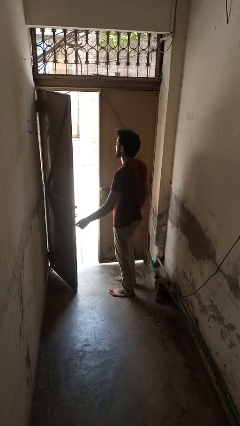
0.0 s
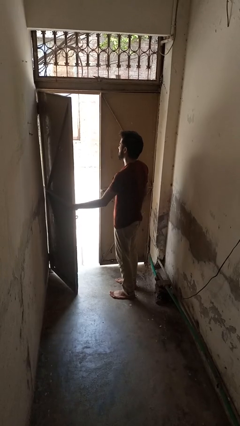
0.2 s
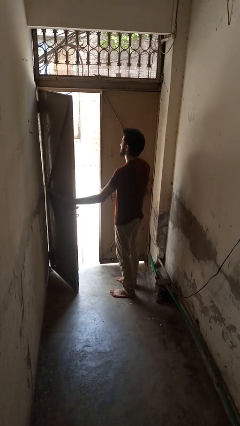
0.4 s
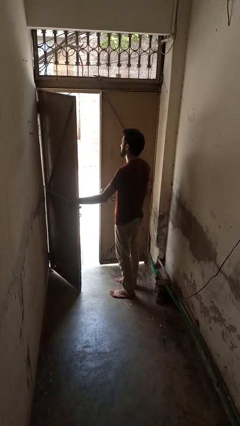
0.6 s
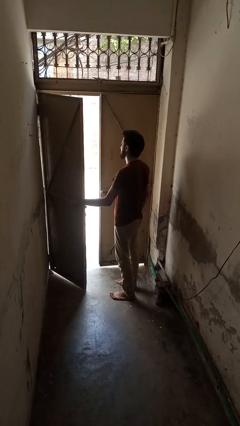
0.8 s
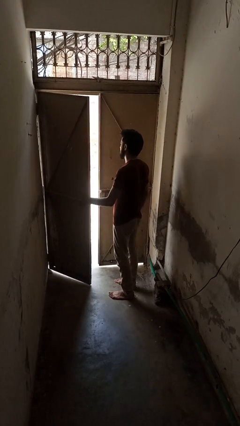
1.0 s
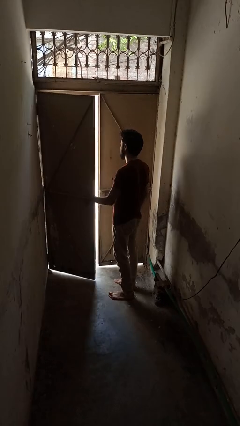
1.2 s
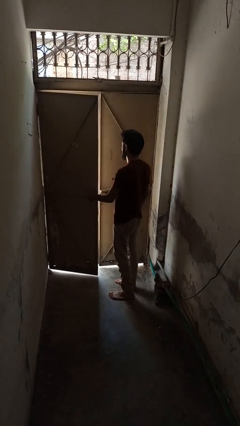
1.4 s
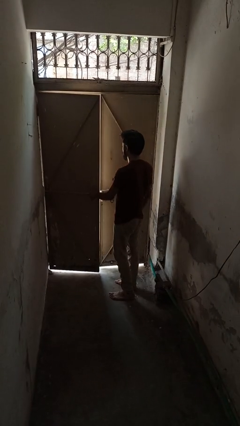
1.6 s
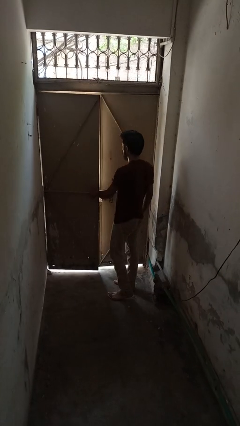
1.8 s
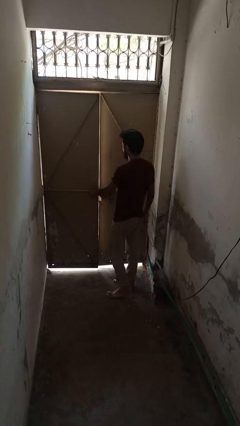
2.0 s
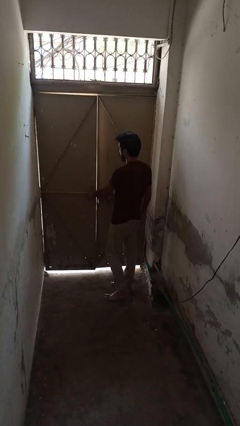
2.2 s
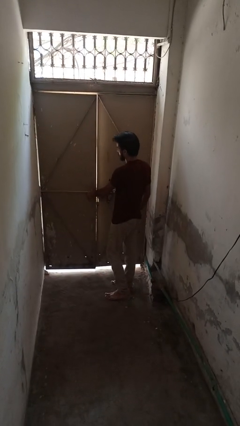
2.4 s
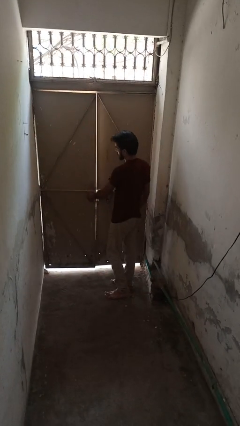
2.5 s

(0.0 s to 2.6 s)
person closes gate

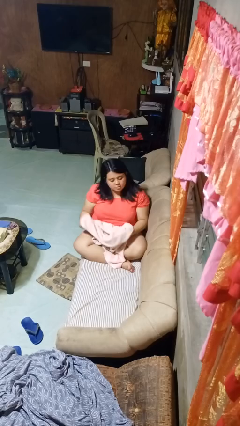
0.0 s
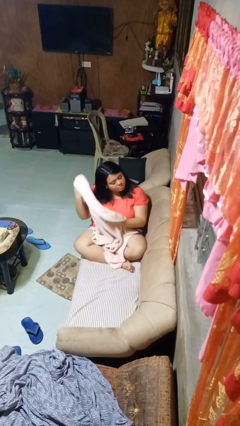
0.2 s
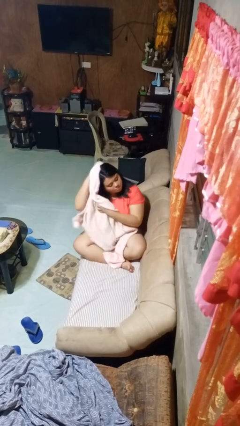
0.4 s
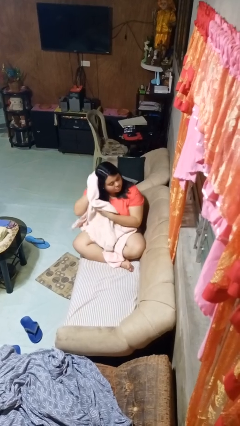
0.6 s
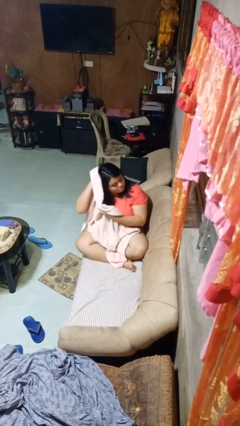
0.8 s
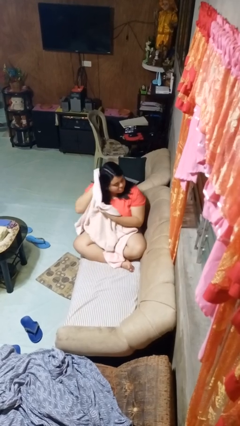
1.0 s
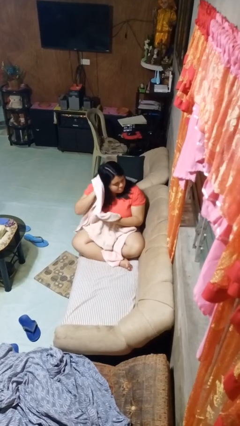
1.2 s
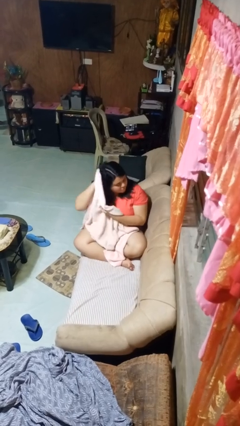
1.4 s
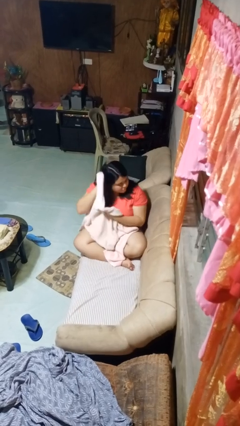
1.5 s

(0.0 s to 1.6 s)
person dries hair with towel

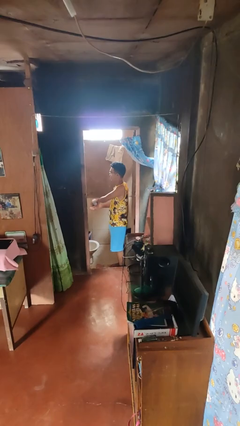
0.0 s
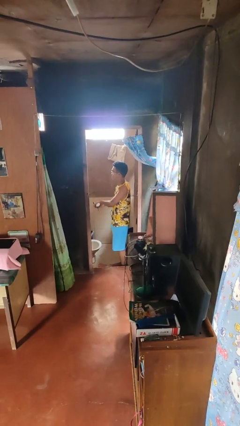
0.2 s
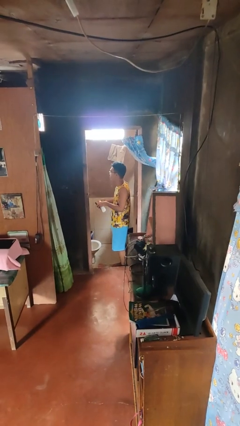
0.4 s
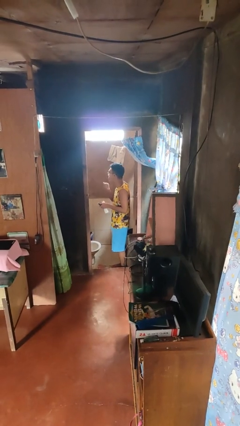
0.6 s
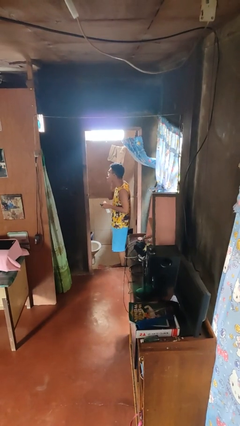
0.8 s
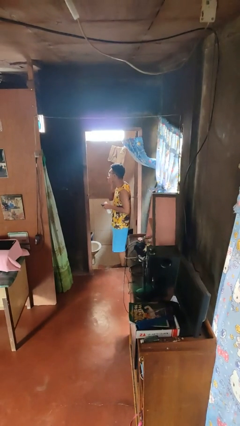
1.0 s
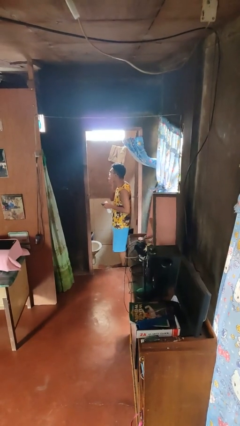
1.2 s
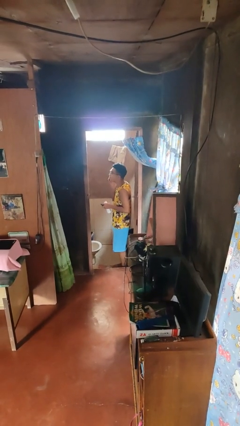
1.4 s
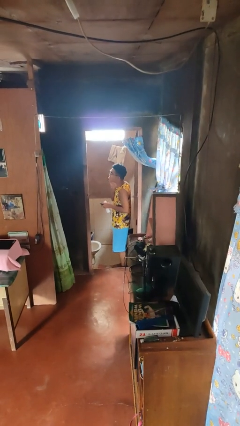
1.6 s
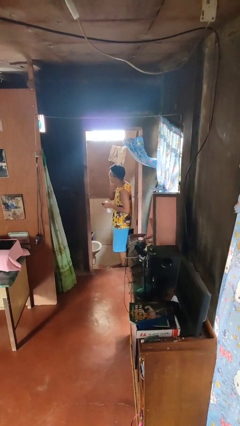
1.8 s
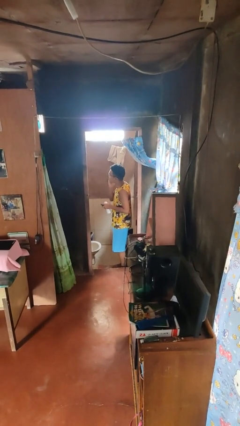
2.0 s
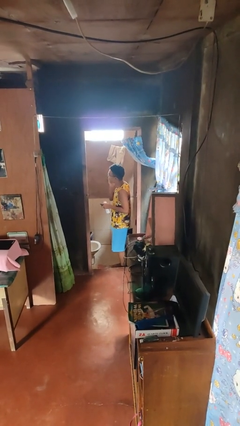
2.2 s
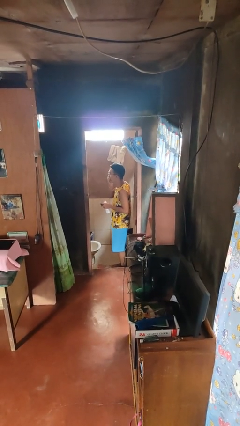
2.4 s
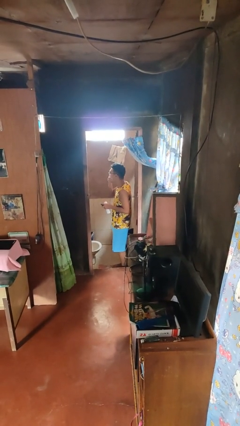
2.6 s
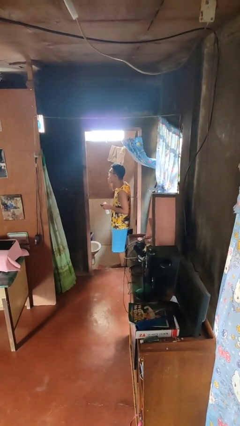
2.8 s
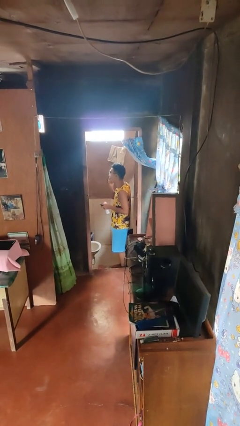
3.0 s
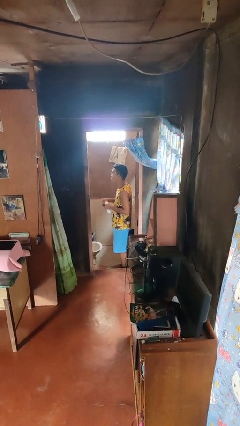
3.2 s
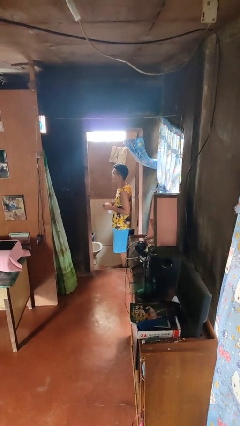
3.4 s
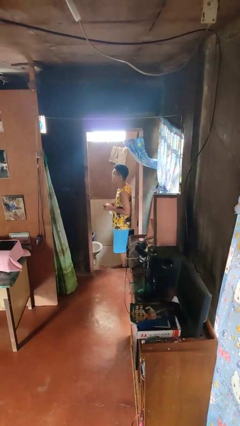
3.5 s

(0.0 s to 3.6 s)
person applies shaving cream

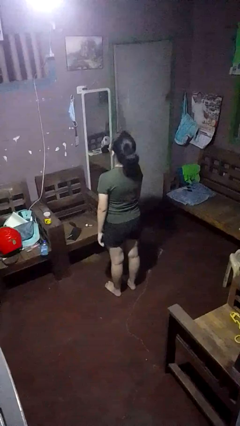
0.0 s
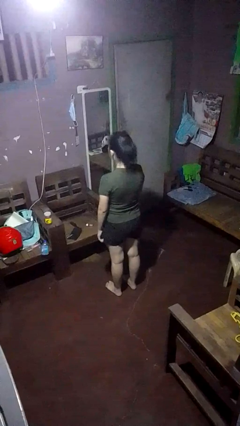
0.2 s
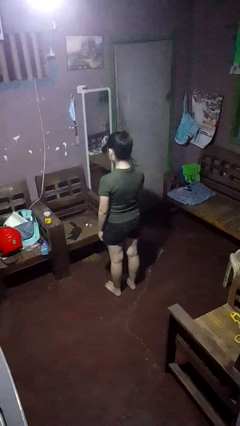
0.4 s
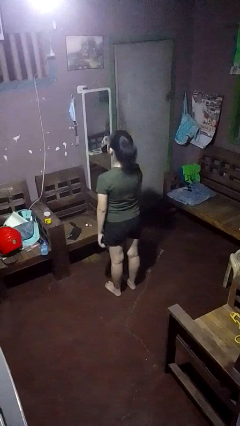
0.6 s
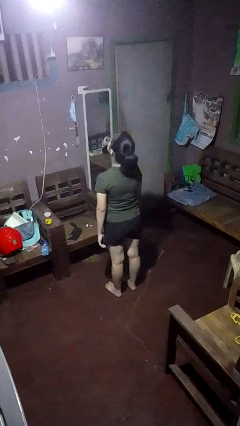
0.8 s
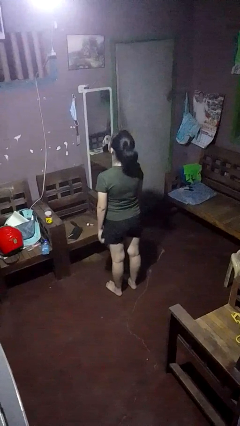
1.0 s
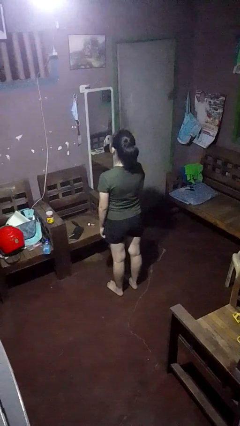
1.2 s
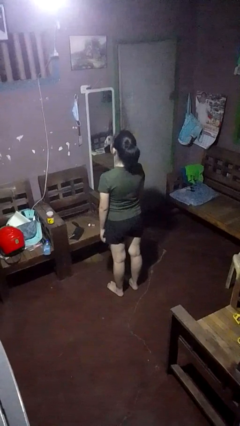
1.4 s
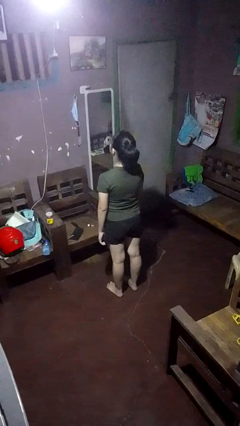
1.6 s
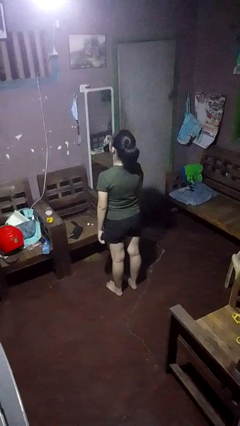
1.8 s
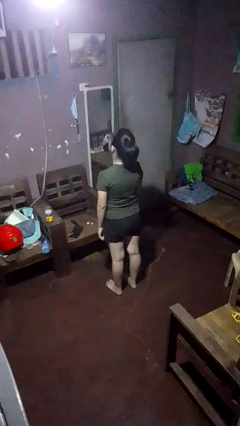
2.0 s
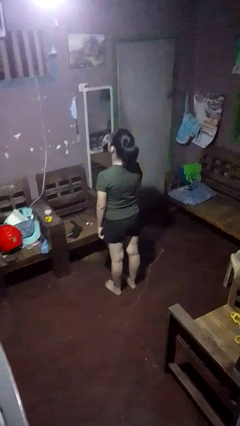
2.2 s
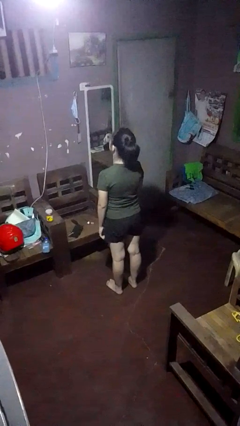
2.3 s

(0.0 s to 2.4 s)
person nods head

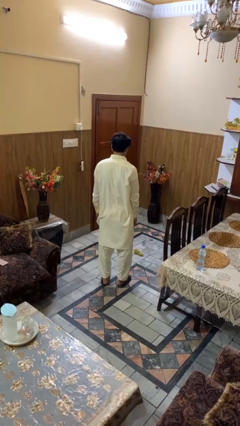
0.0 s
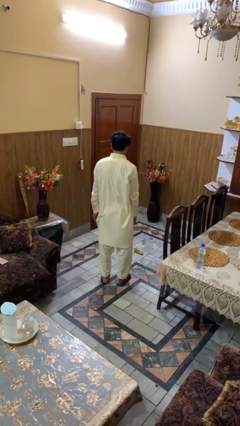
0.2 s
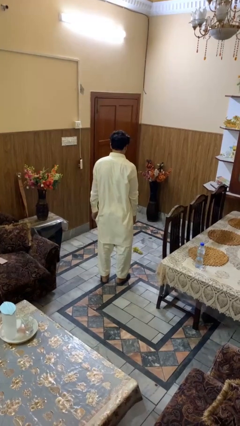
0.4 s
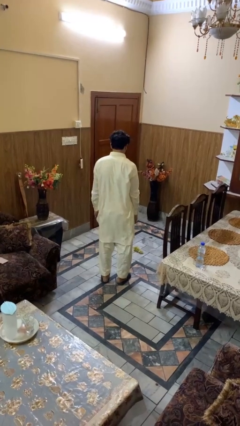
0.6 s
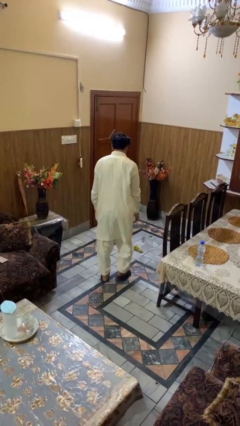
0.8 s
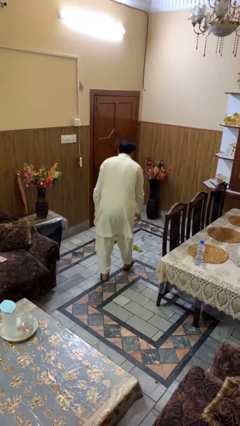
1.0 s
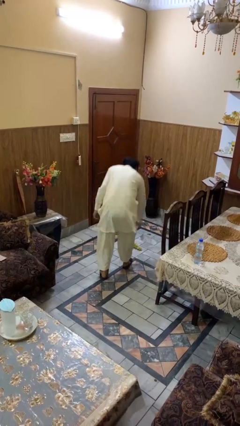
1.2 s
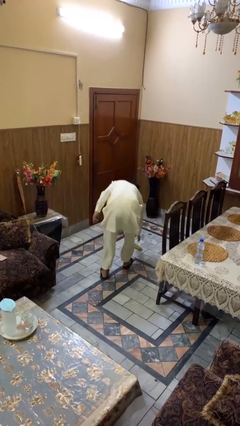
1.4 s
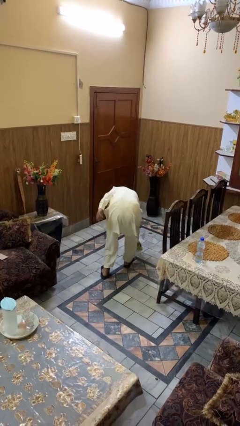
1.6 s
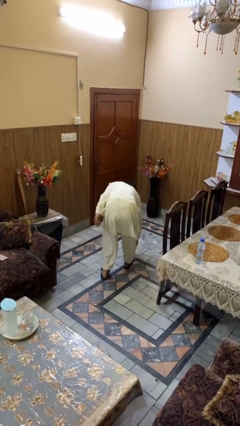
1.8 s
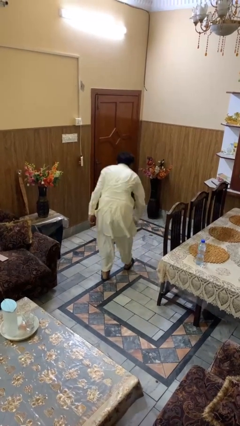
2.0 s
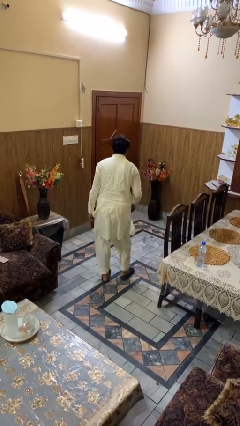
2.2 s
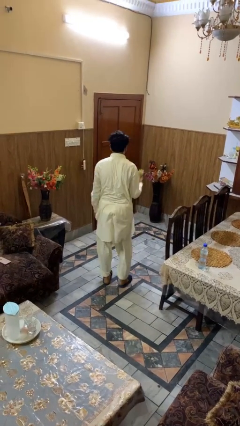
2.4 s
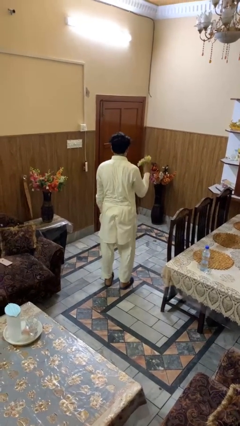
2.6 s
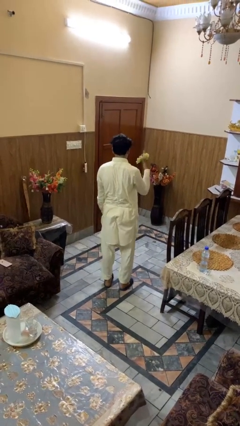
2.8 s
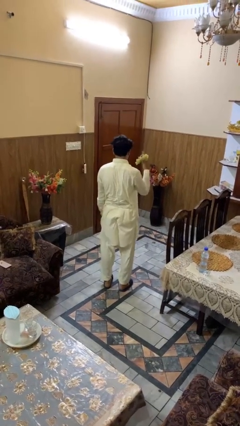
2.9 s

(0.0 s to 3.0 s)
person picks up object from floor

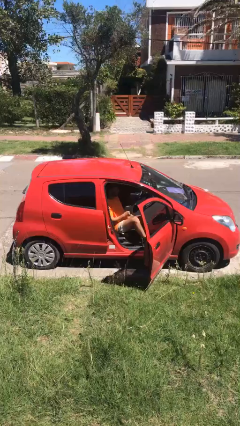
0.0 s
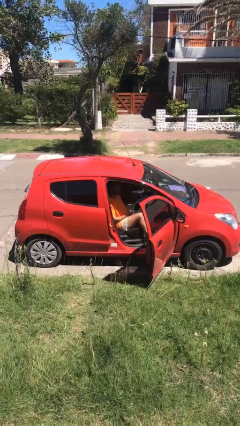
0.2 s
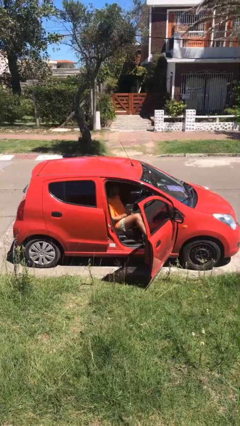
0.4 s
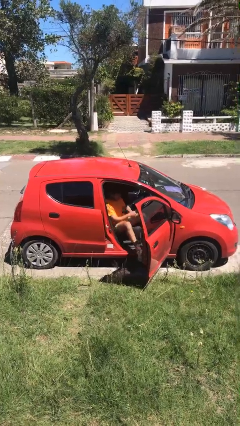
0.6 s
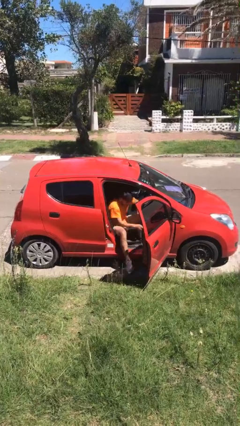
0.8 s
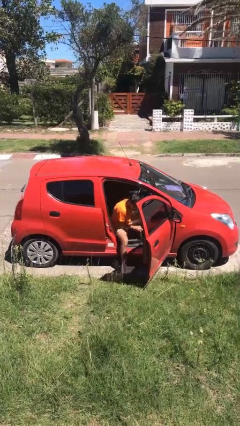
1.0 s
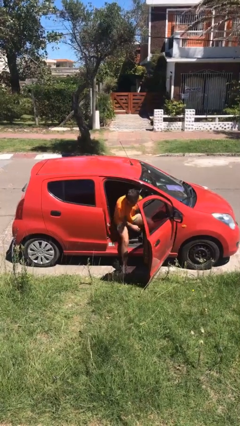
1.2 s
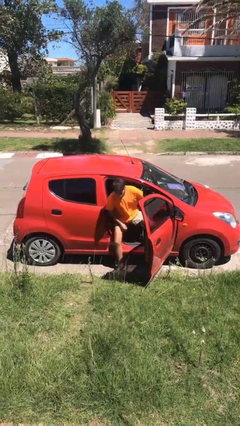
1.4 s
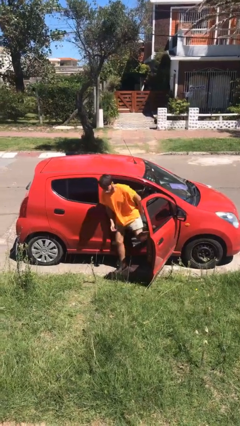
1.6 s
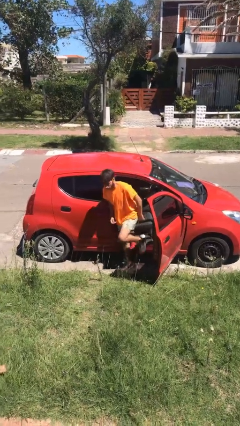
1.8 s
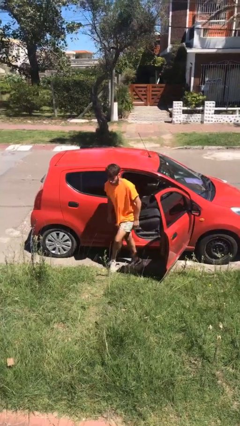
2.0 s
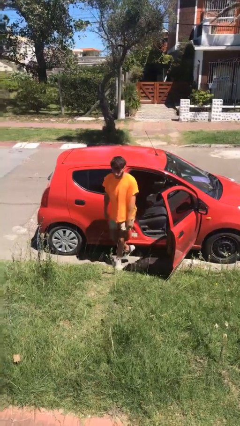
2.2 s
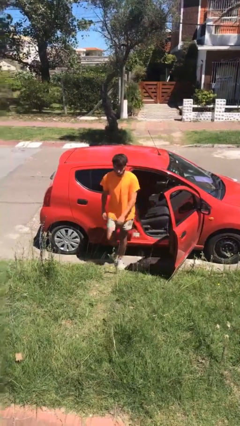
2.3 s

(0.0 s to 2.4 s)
person exits car

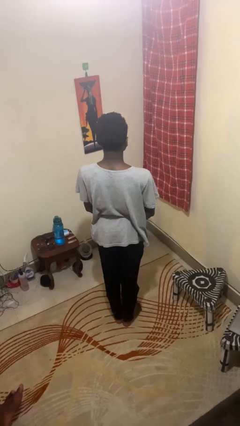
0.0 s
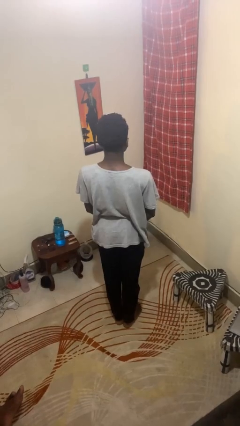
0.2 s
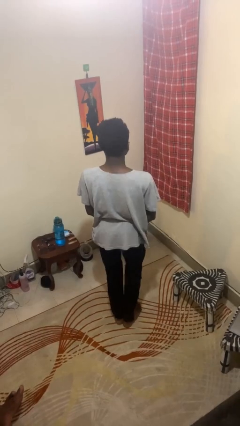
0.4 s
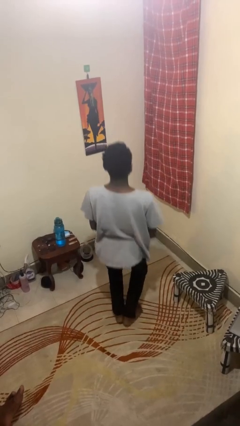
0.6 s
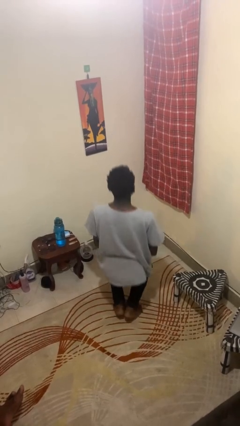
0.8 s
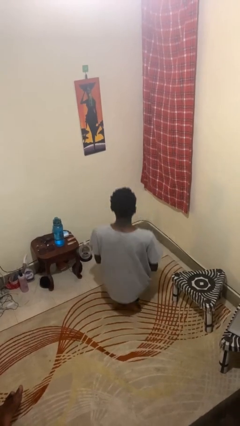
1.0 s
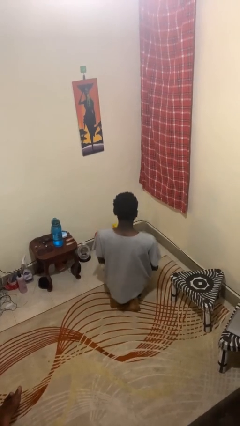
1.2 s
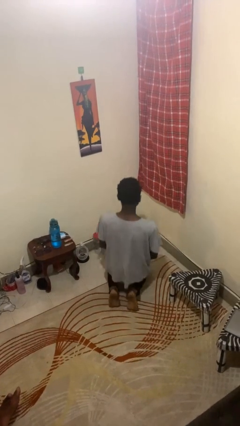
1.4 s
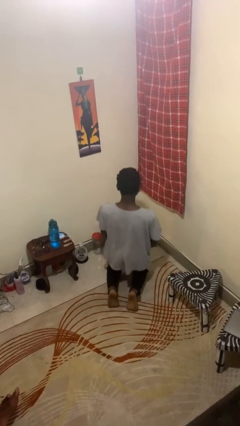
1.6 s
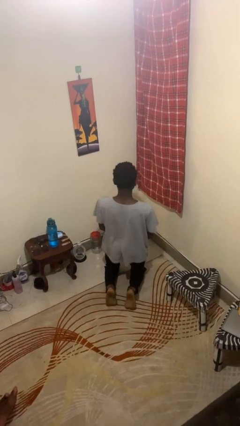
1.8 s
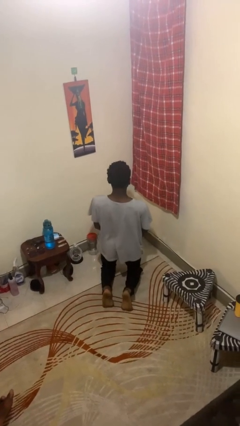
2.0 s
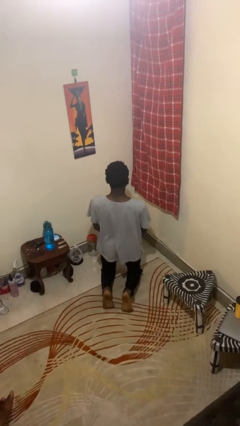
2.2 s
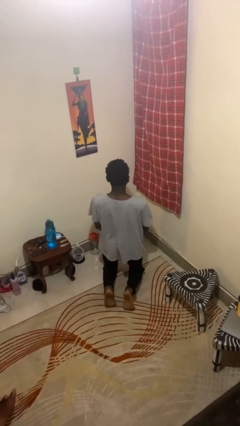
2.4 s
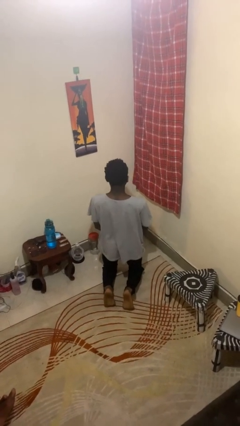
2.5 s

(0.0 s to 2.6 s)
person kneels
